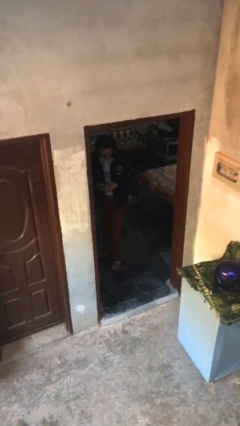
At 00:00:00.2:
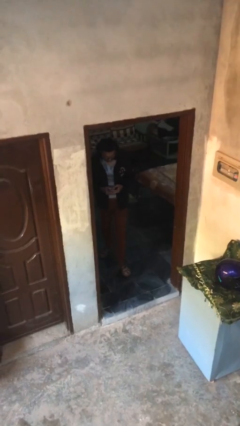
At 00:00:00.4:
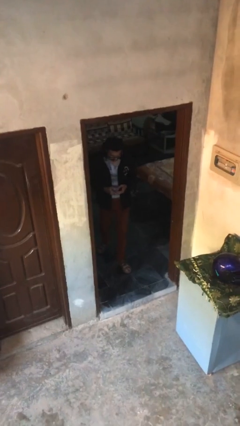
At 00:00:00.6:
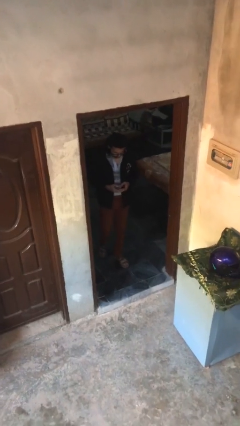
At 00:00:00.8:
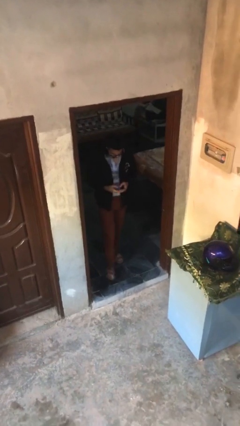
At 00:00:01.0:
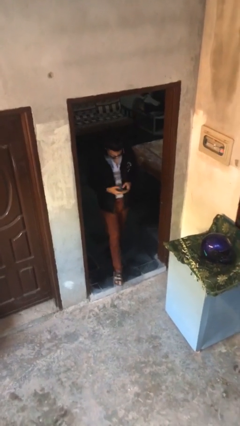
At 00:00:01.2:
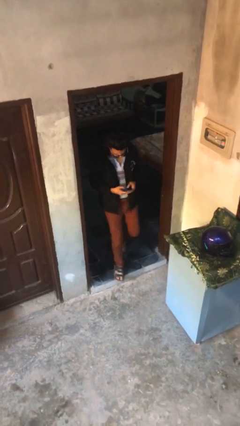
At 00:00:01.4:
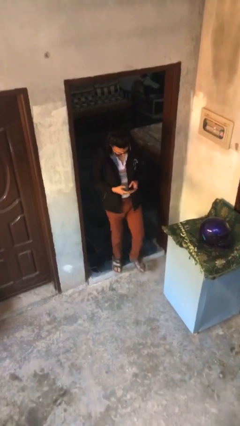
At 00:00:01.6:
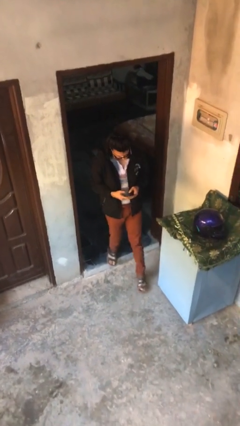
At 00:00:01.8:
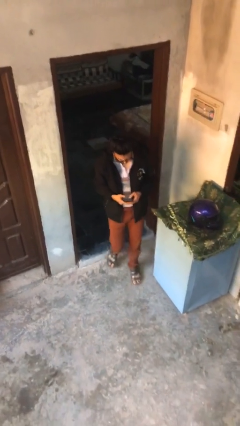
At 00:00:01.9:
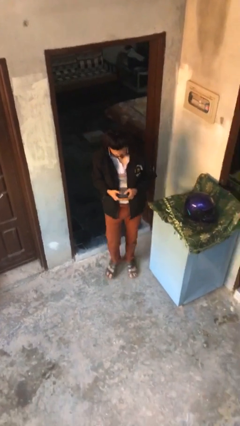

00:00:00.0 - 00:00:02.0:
person exits scene through structure

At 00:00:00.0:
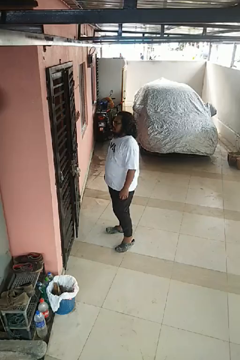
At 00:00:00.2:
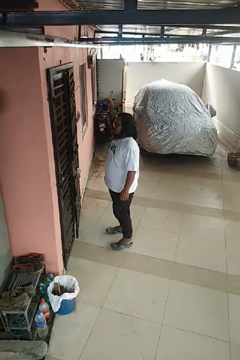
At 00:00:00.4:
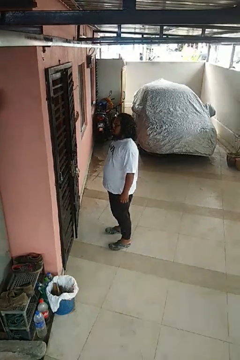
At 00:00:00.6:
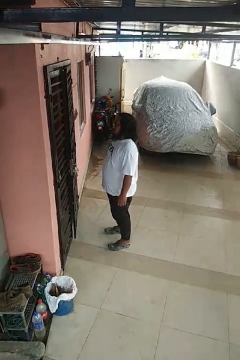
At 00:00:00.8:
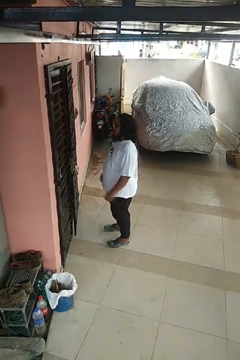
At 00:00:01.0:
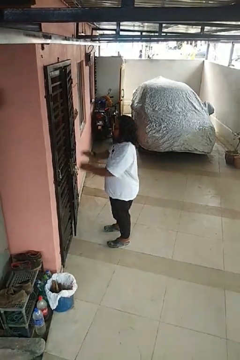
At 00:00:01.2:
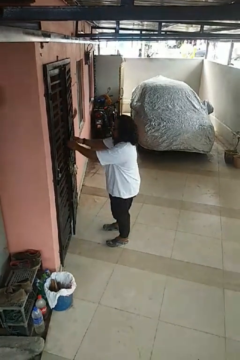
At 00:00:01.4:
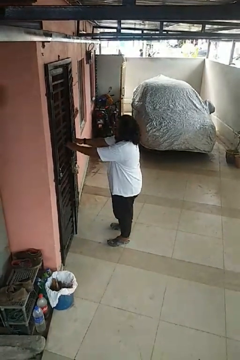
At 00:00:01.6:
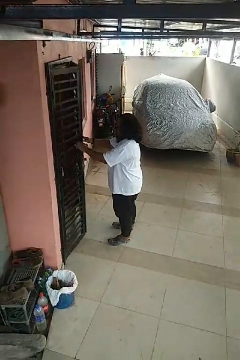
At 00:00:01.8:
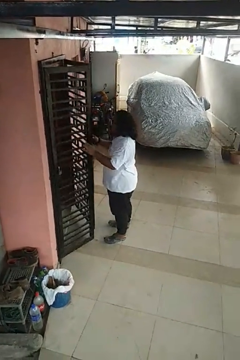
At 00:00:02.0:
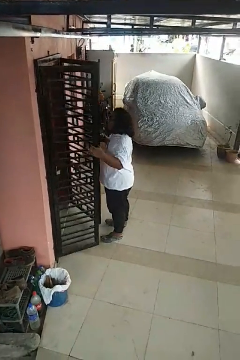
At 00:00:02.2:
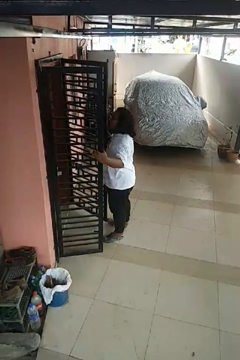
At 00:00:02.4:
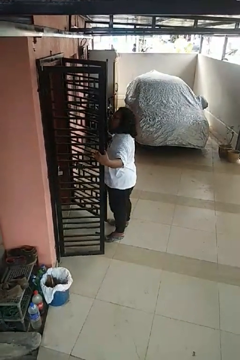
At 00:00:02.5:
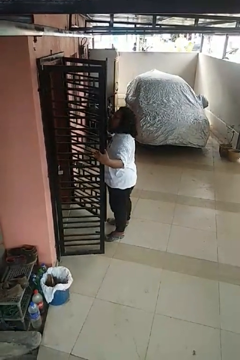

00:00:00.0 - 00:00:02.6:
person opens gate

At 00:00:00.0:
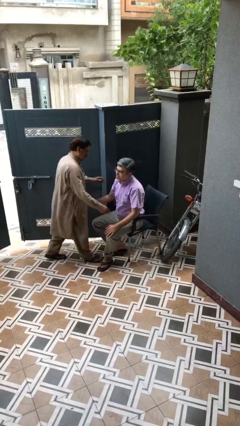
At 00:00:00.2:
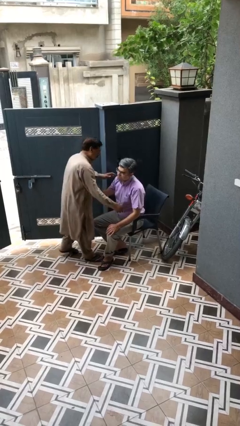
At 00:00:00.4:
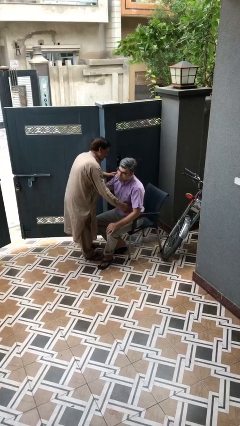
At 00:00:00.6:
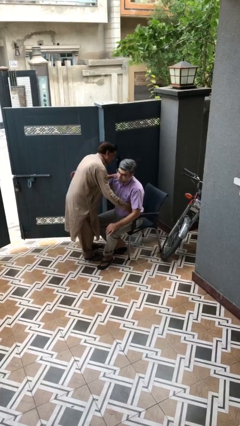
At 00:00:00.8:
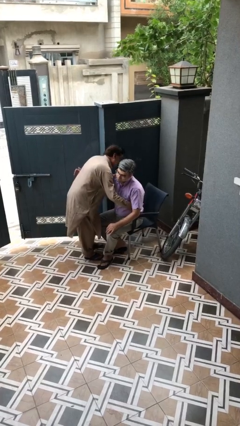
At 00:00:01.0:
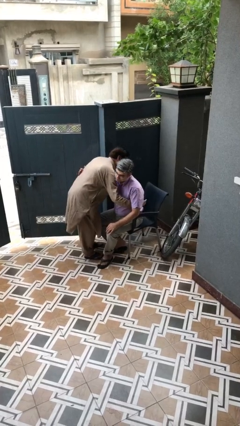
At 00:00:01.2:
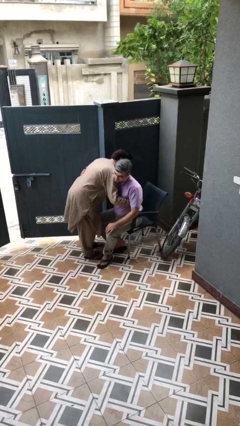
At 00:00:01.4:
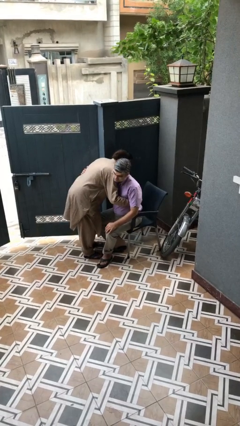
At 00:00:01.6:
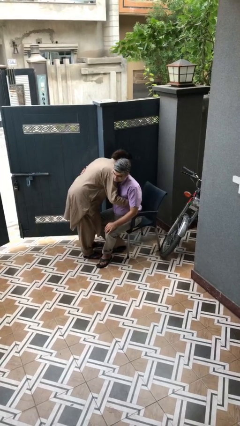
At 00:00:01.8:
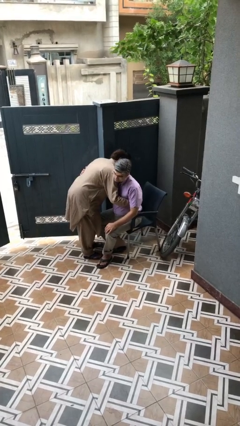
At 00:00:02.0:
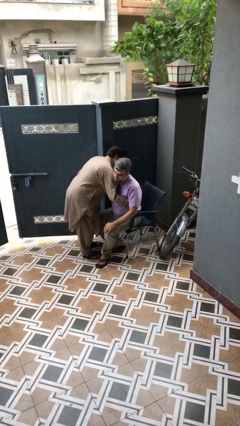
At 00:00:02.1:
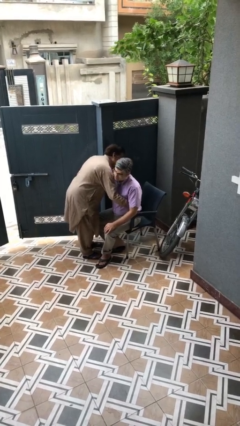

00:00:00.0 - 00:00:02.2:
person embraces person

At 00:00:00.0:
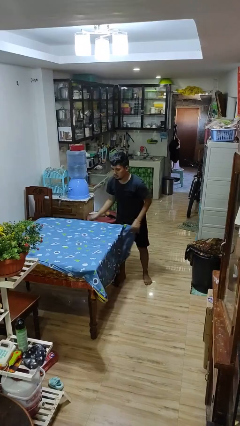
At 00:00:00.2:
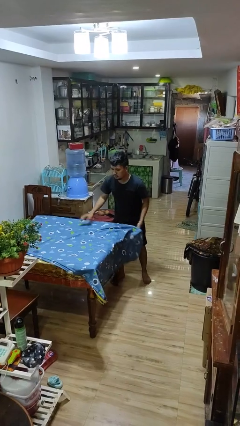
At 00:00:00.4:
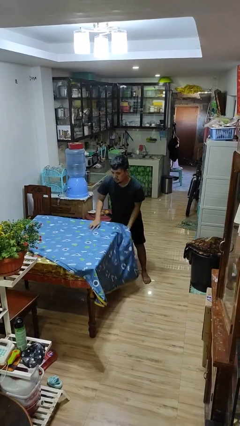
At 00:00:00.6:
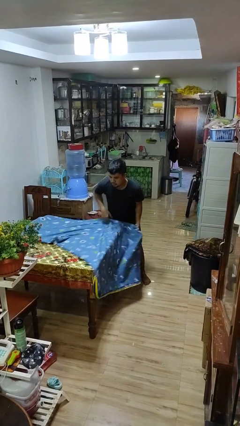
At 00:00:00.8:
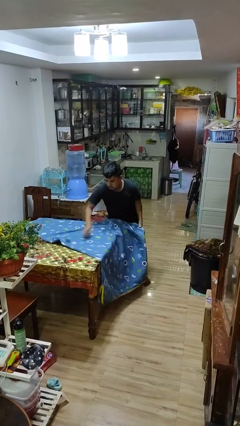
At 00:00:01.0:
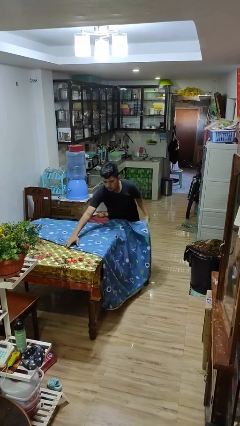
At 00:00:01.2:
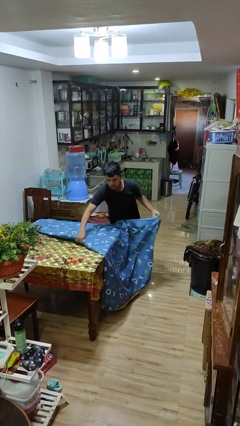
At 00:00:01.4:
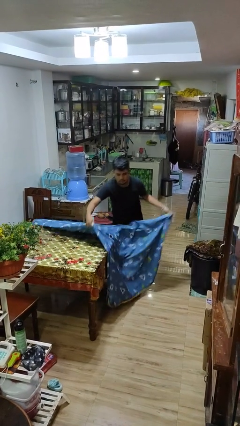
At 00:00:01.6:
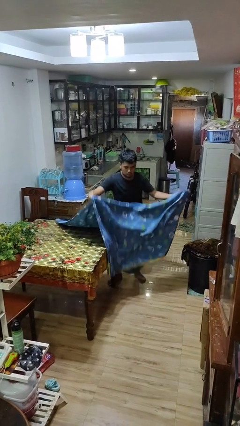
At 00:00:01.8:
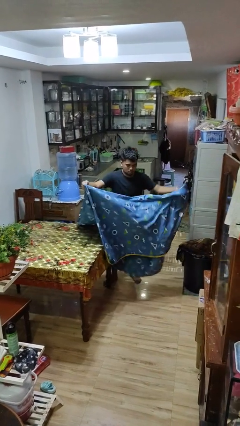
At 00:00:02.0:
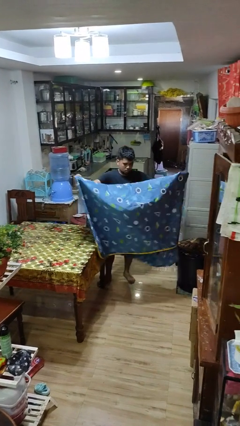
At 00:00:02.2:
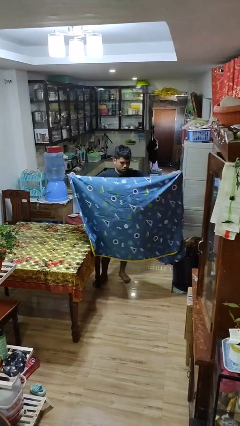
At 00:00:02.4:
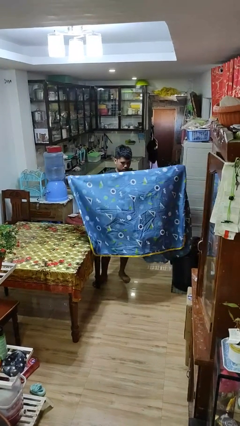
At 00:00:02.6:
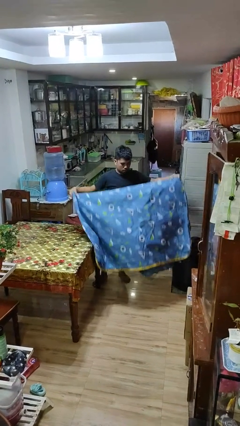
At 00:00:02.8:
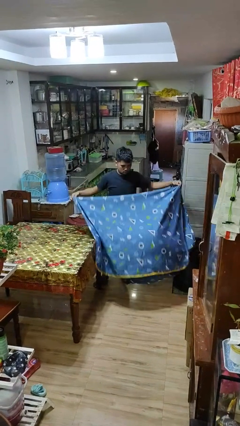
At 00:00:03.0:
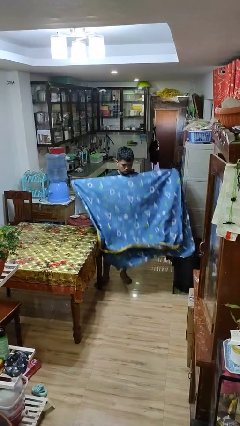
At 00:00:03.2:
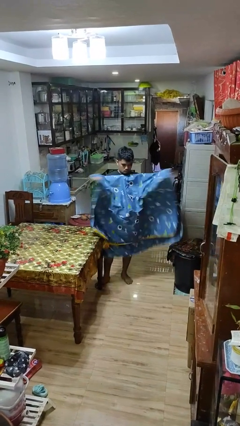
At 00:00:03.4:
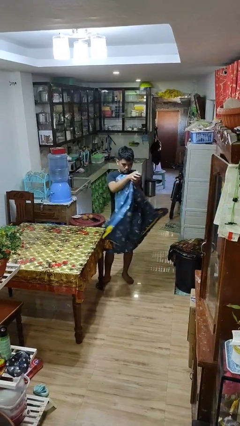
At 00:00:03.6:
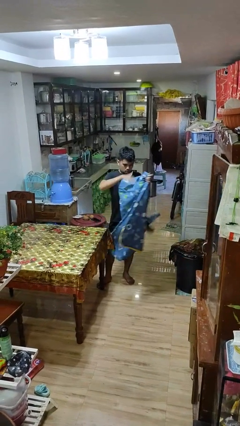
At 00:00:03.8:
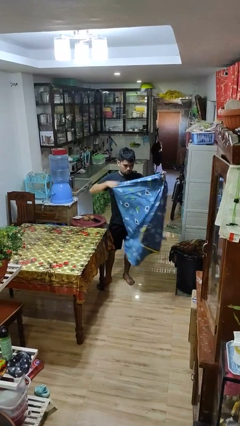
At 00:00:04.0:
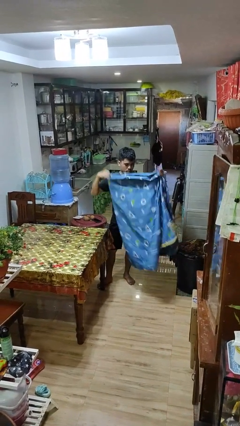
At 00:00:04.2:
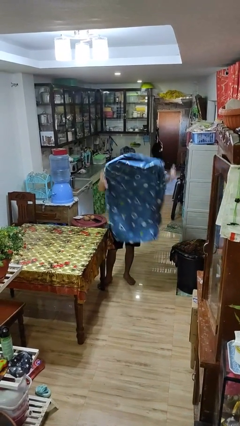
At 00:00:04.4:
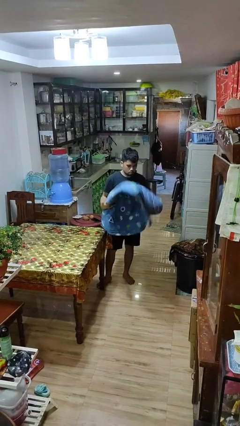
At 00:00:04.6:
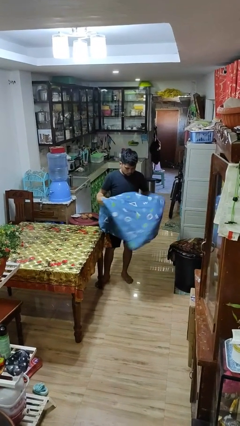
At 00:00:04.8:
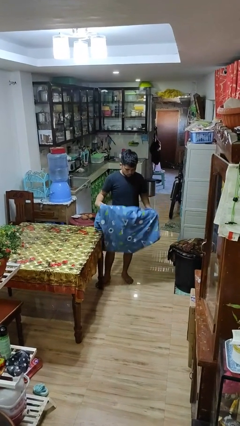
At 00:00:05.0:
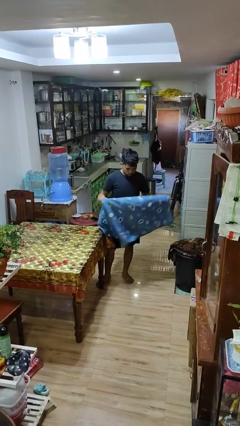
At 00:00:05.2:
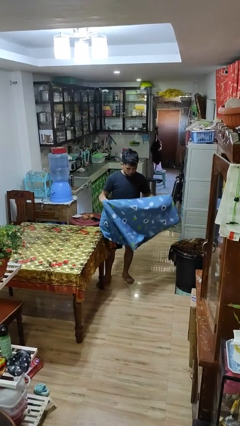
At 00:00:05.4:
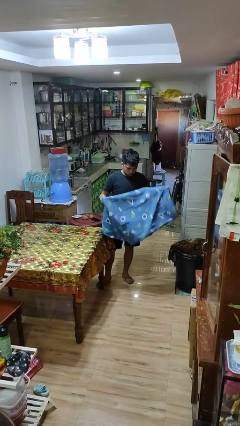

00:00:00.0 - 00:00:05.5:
person folds tablecloth

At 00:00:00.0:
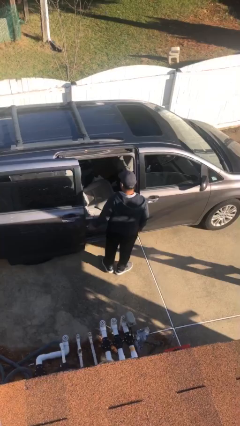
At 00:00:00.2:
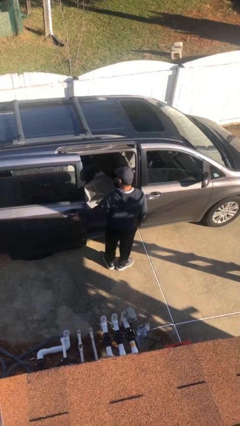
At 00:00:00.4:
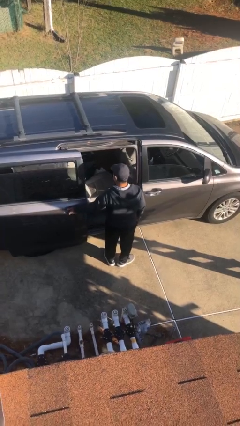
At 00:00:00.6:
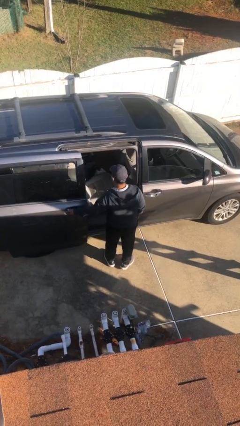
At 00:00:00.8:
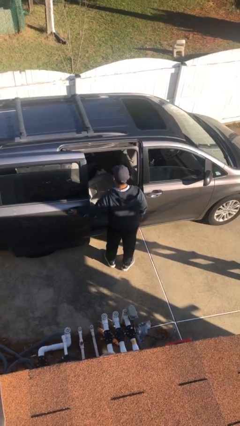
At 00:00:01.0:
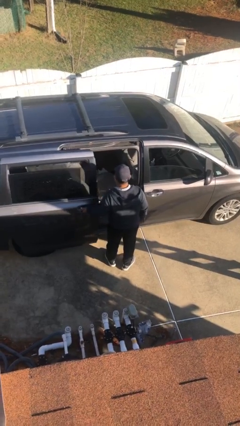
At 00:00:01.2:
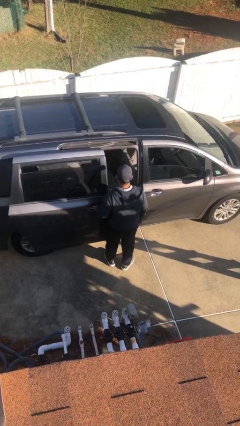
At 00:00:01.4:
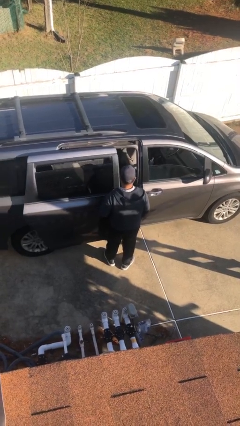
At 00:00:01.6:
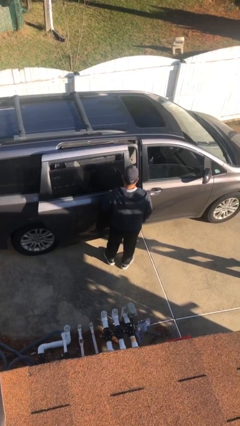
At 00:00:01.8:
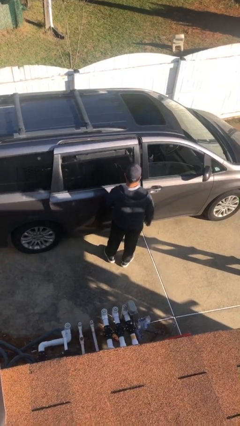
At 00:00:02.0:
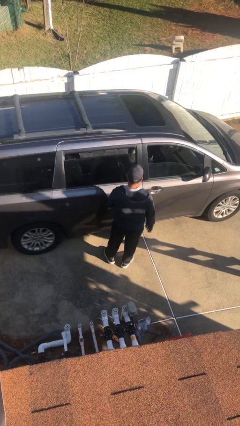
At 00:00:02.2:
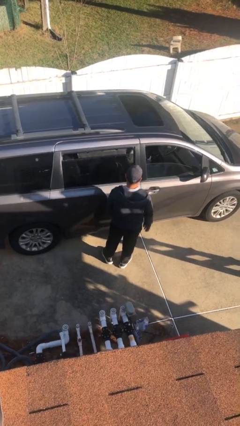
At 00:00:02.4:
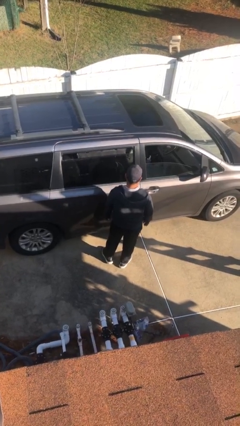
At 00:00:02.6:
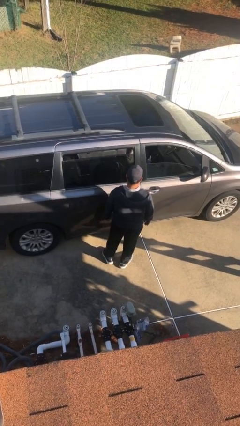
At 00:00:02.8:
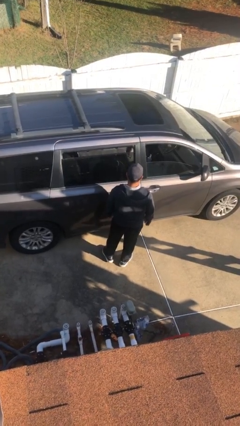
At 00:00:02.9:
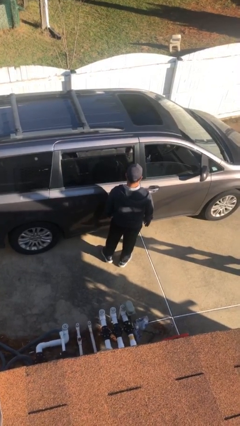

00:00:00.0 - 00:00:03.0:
person closes car door

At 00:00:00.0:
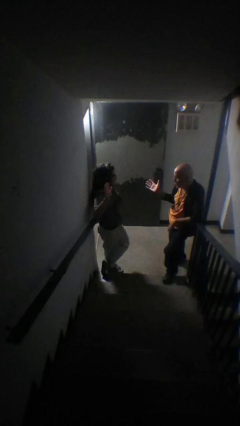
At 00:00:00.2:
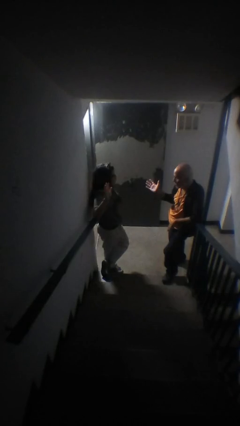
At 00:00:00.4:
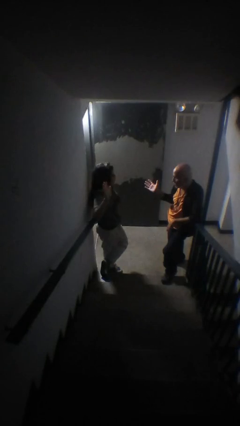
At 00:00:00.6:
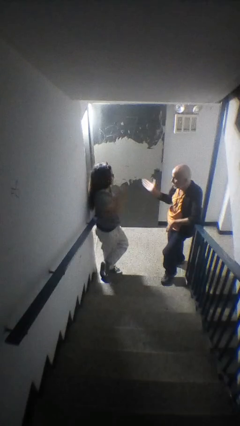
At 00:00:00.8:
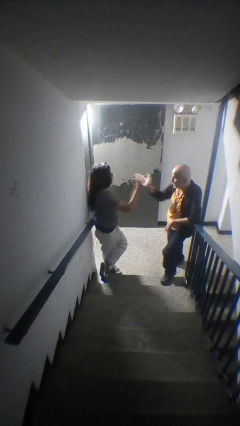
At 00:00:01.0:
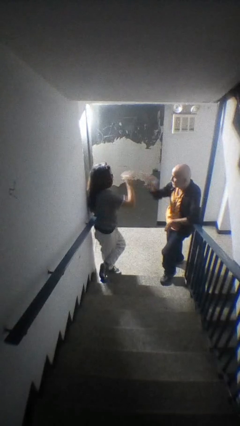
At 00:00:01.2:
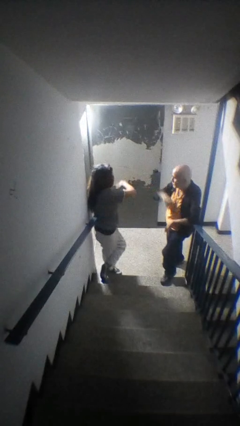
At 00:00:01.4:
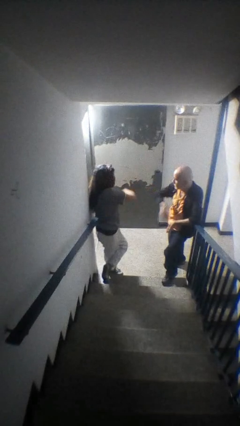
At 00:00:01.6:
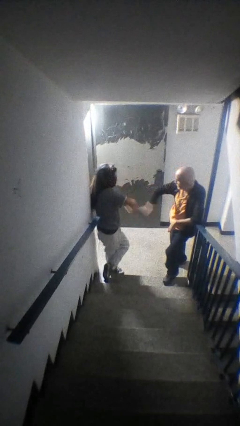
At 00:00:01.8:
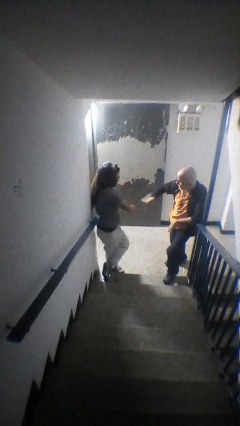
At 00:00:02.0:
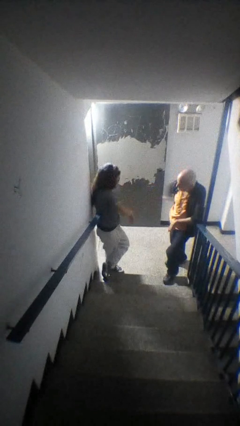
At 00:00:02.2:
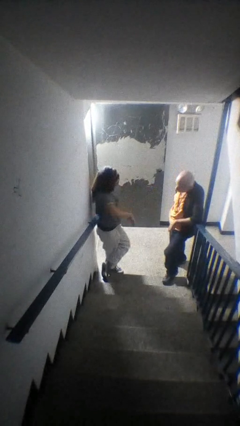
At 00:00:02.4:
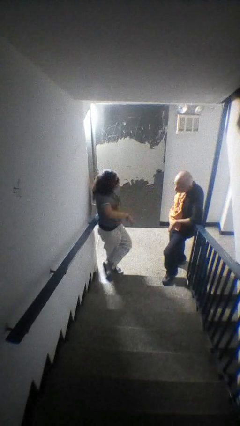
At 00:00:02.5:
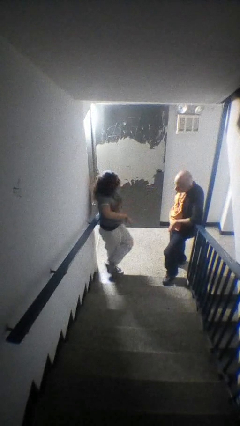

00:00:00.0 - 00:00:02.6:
person highfives hand
